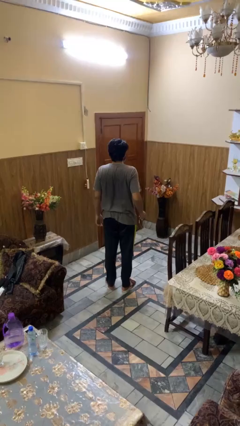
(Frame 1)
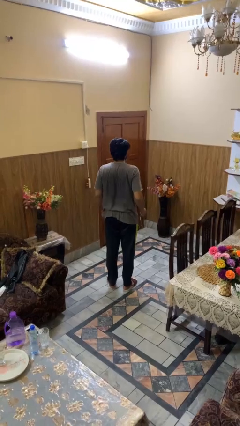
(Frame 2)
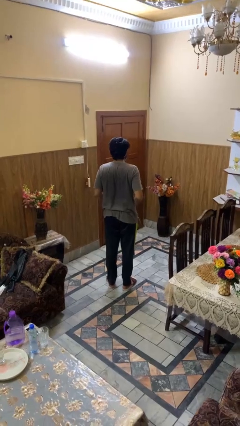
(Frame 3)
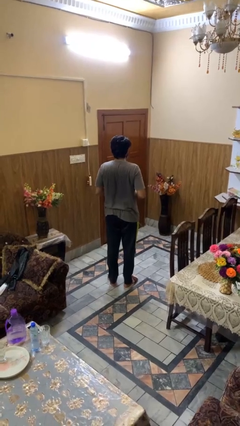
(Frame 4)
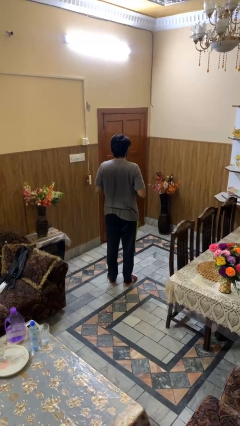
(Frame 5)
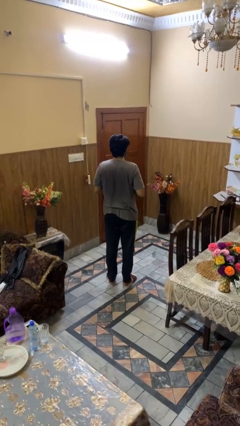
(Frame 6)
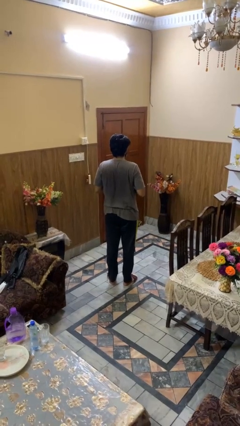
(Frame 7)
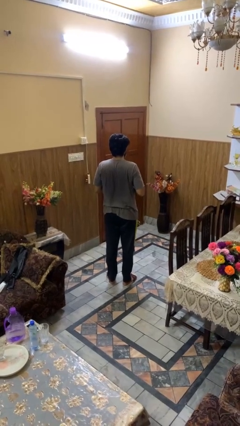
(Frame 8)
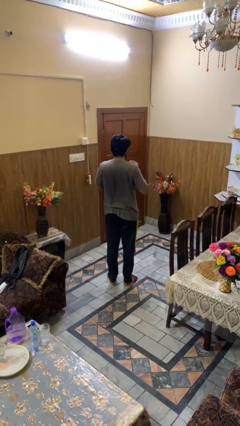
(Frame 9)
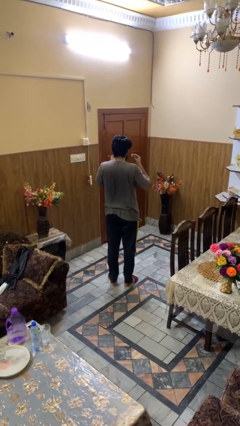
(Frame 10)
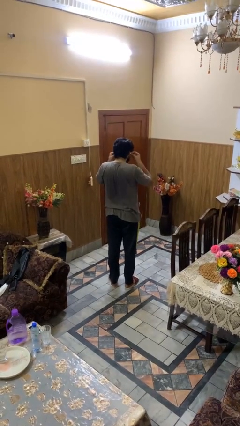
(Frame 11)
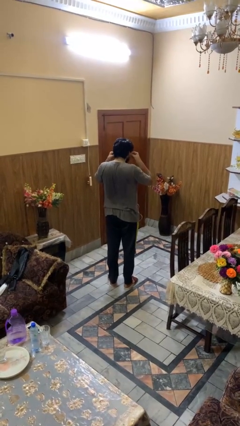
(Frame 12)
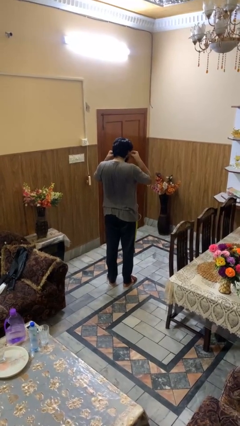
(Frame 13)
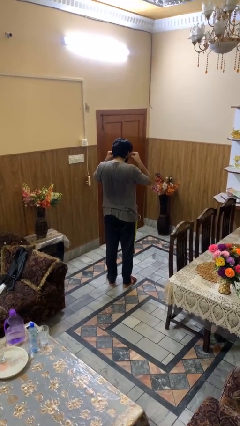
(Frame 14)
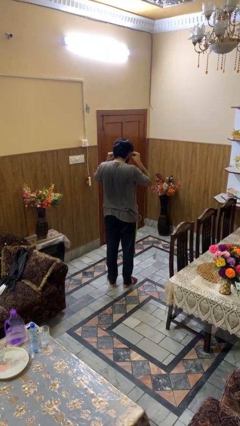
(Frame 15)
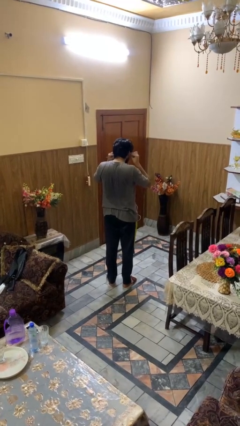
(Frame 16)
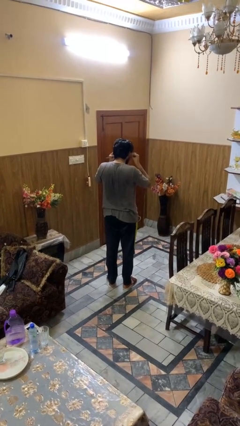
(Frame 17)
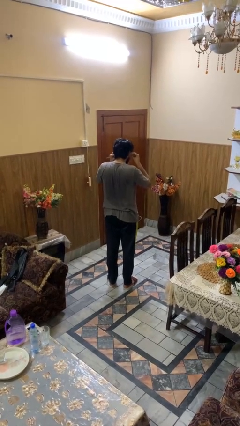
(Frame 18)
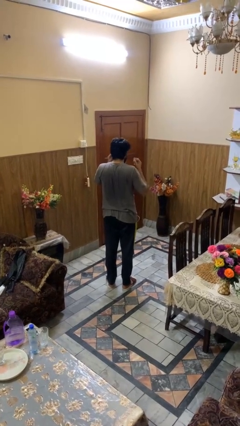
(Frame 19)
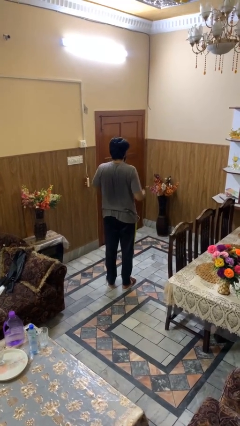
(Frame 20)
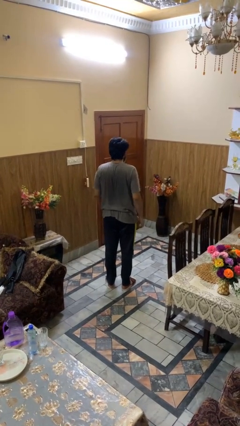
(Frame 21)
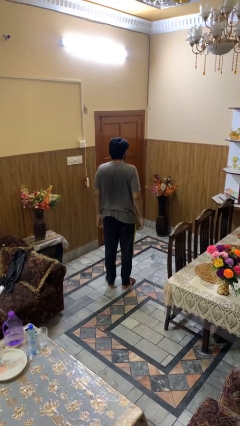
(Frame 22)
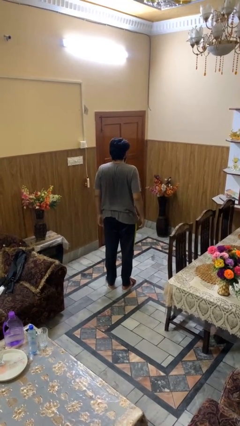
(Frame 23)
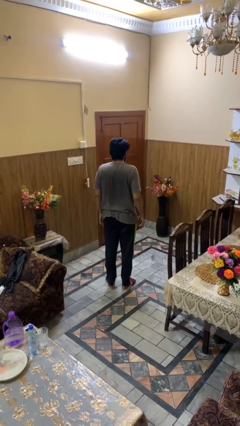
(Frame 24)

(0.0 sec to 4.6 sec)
person puts on headphones

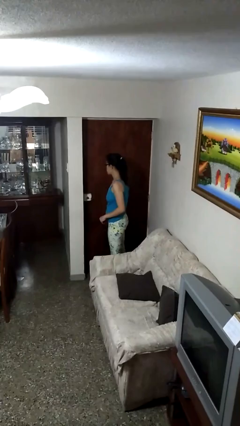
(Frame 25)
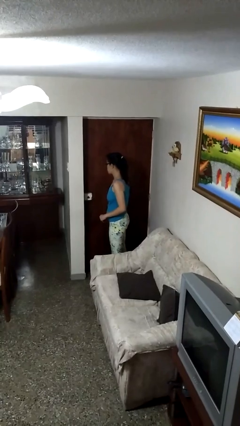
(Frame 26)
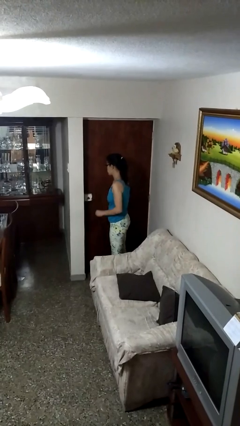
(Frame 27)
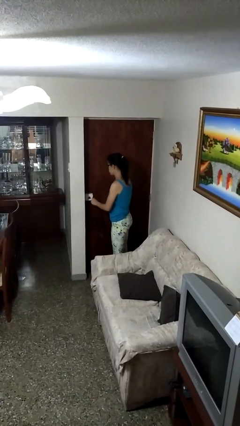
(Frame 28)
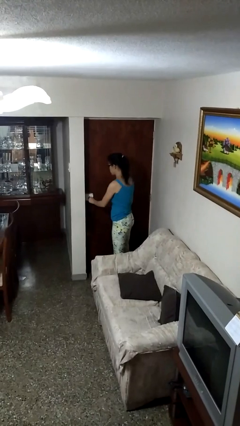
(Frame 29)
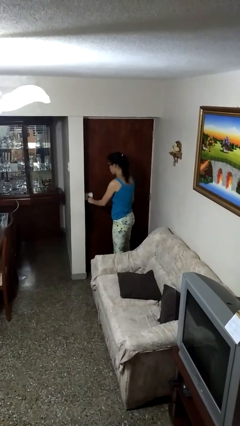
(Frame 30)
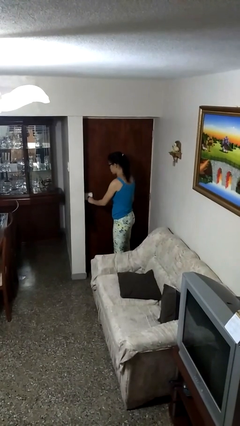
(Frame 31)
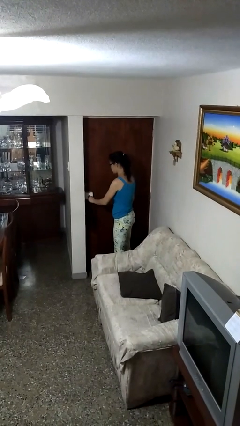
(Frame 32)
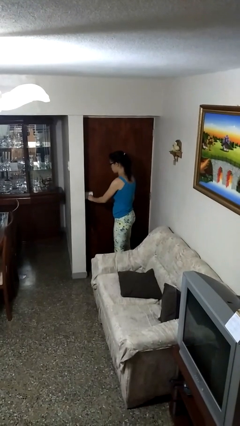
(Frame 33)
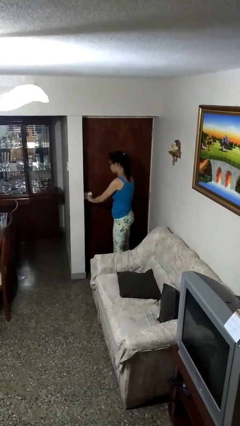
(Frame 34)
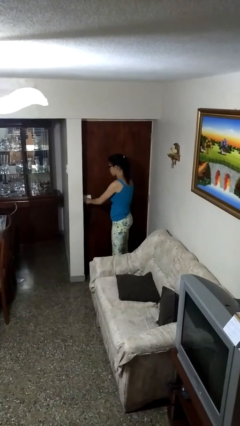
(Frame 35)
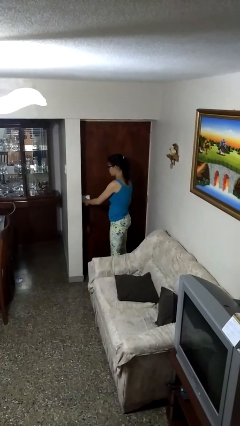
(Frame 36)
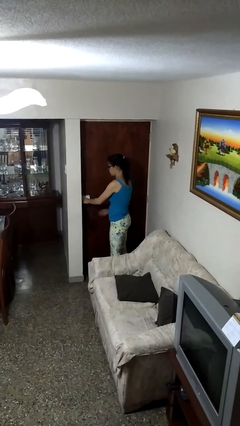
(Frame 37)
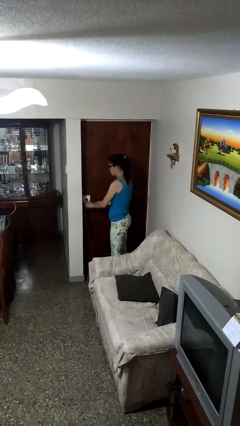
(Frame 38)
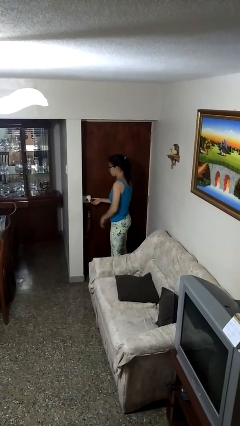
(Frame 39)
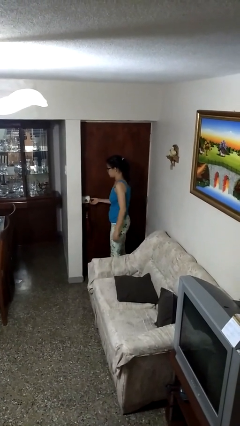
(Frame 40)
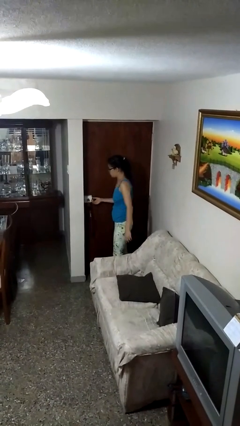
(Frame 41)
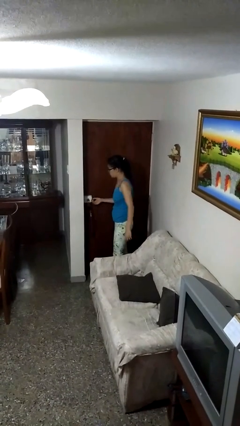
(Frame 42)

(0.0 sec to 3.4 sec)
person unlocks door with keys

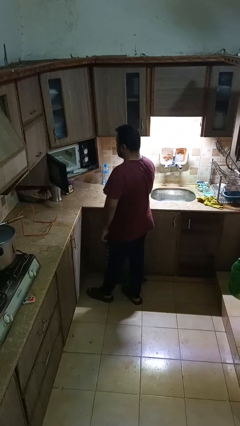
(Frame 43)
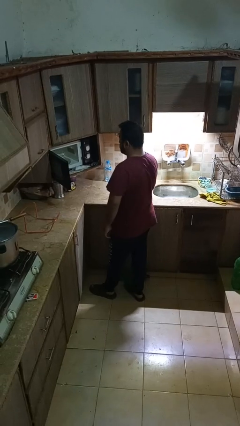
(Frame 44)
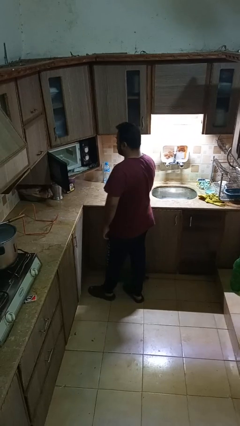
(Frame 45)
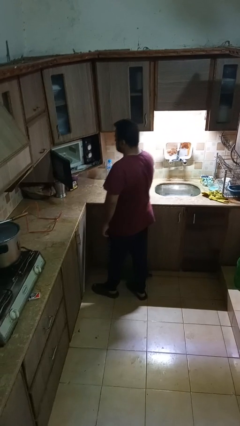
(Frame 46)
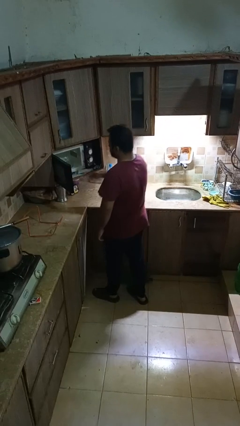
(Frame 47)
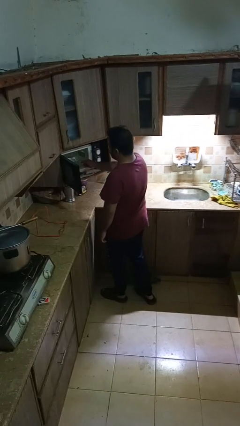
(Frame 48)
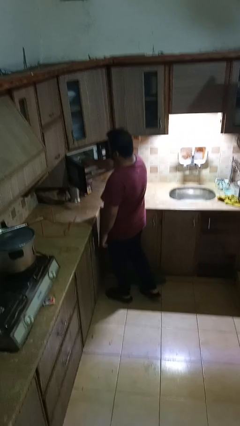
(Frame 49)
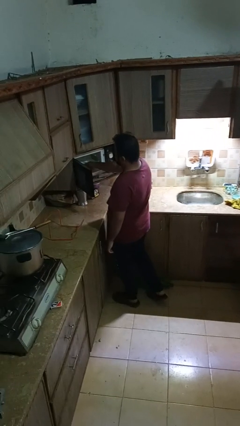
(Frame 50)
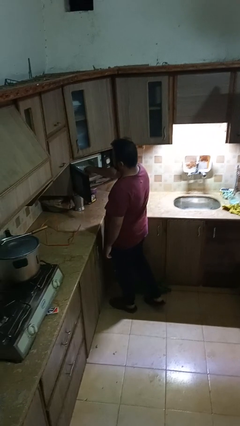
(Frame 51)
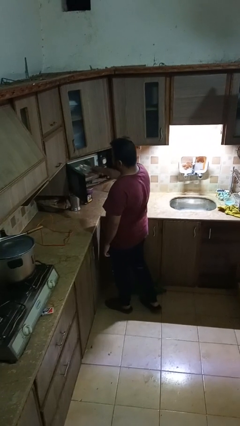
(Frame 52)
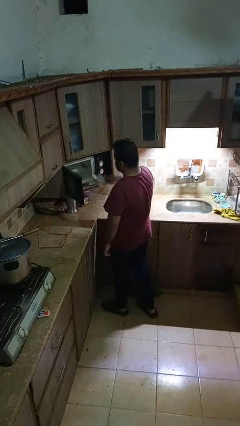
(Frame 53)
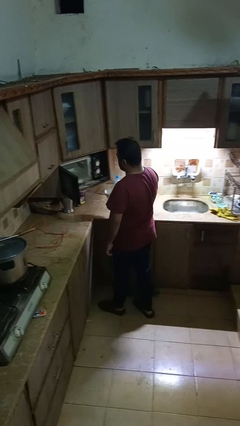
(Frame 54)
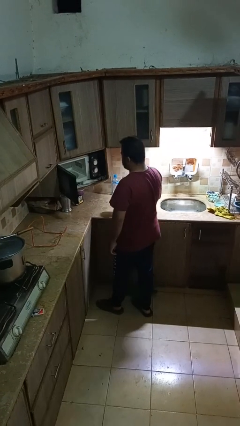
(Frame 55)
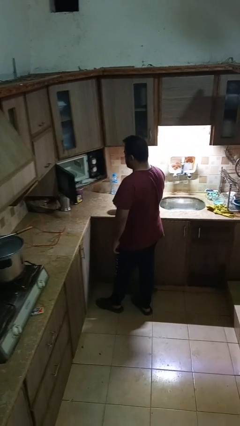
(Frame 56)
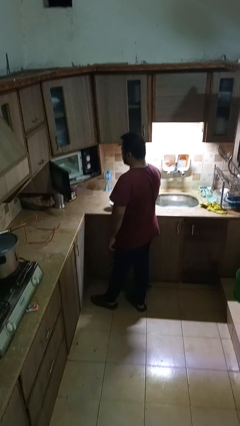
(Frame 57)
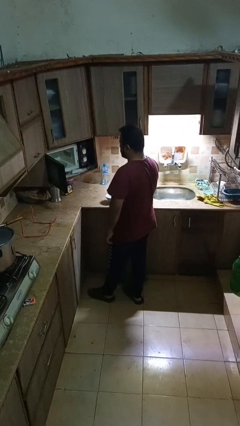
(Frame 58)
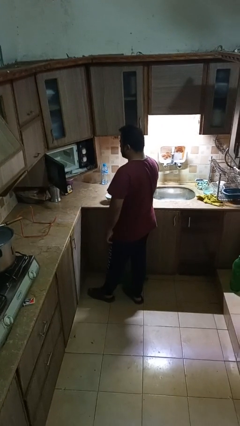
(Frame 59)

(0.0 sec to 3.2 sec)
person takes object from microwave

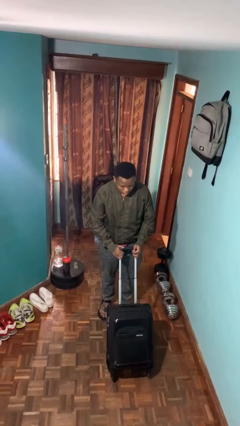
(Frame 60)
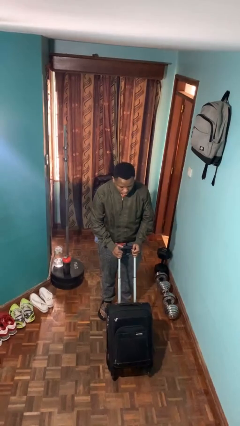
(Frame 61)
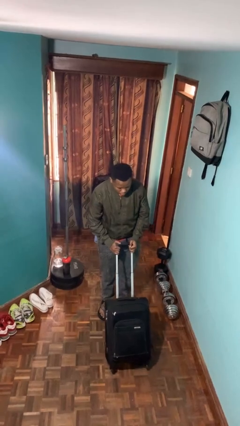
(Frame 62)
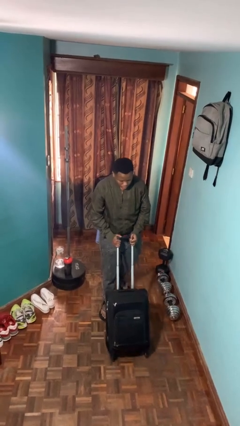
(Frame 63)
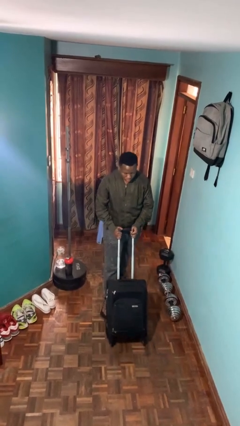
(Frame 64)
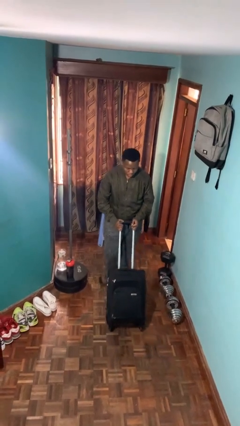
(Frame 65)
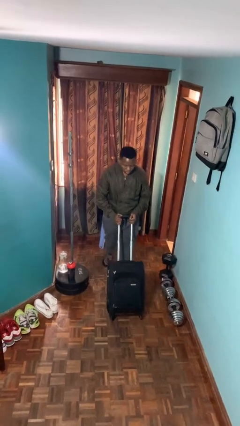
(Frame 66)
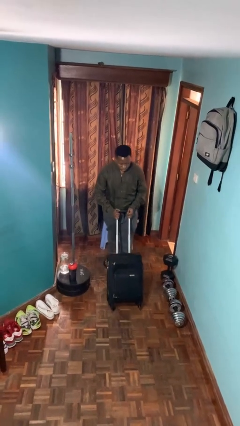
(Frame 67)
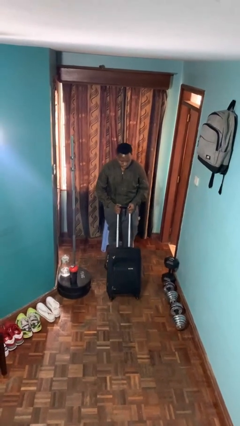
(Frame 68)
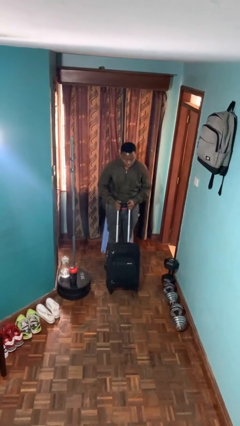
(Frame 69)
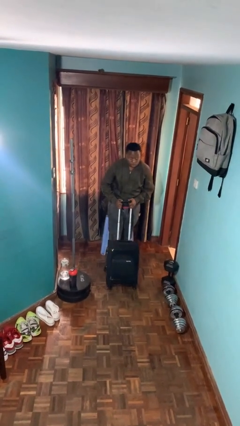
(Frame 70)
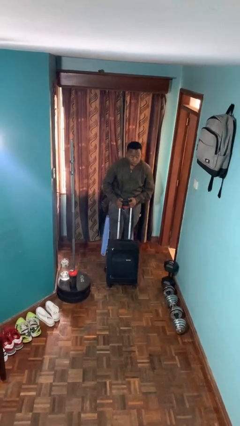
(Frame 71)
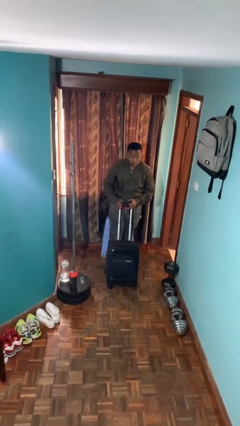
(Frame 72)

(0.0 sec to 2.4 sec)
person pulls wheeled cart

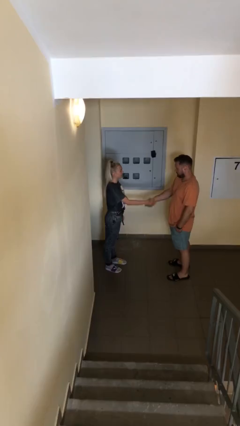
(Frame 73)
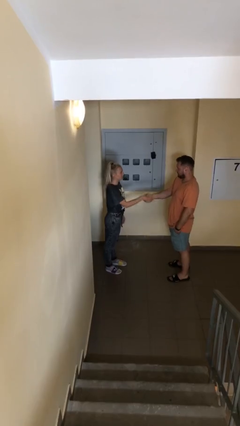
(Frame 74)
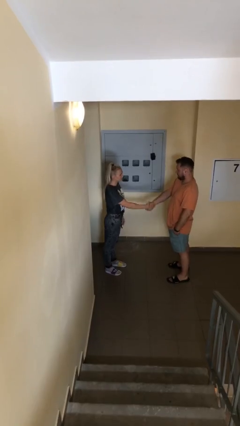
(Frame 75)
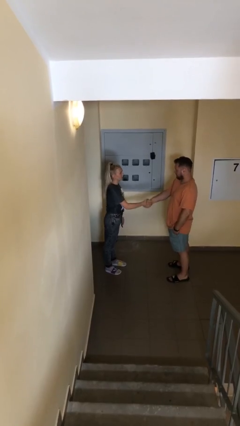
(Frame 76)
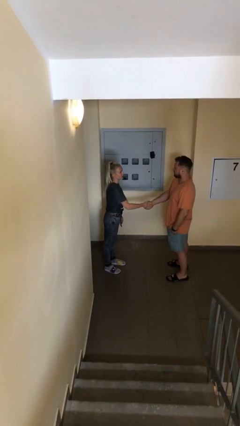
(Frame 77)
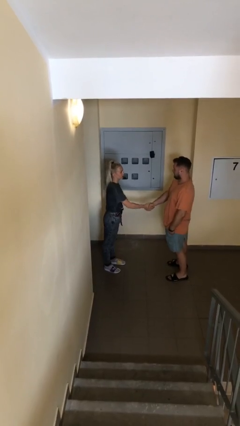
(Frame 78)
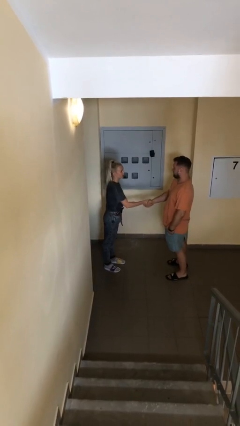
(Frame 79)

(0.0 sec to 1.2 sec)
person shakes hand

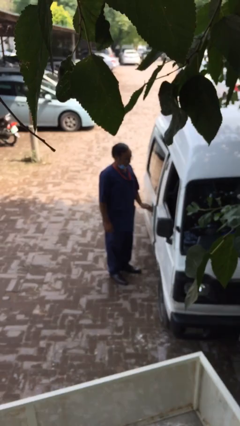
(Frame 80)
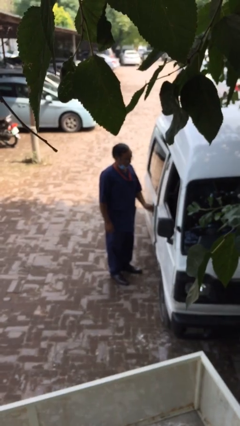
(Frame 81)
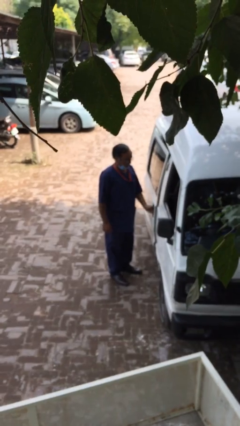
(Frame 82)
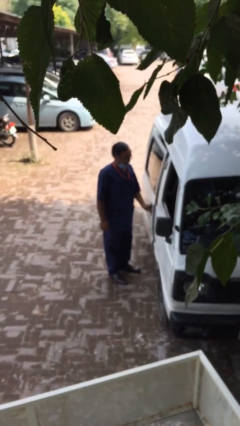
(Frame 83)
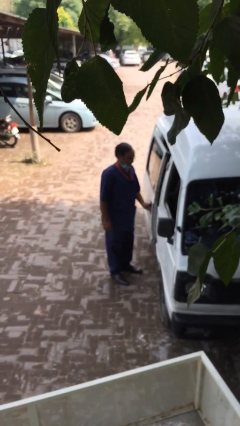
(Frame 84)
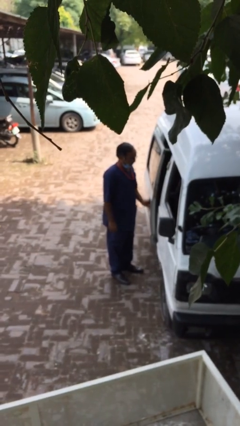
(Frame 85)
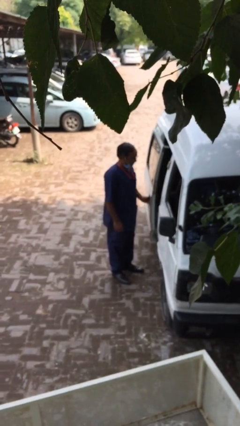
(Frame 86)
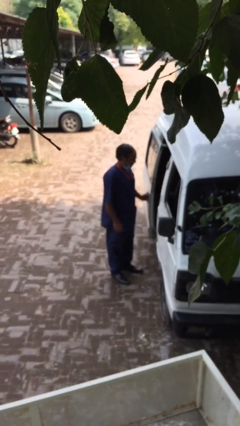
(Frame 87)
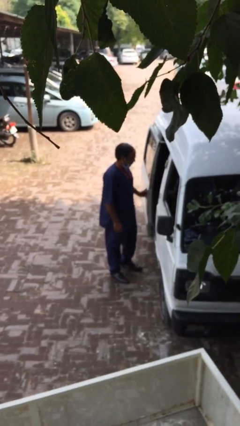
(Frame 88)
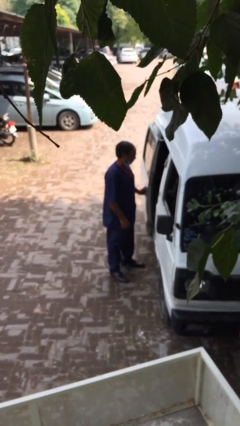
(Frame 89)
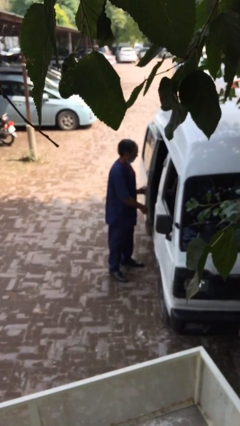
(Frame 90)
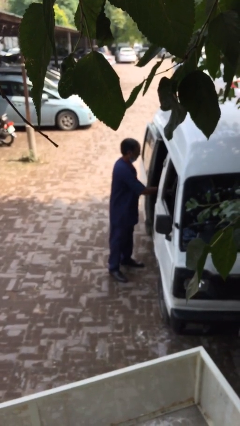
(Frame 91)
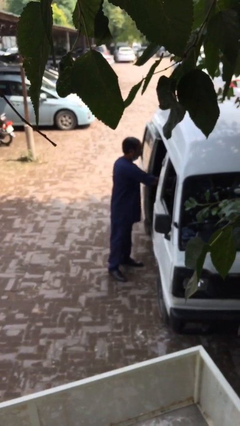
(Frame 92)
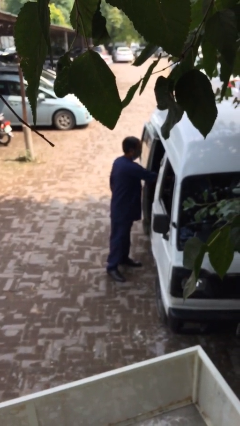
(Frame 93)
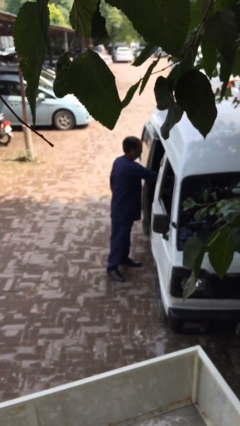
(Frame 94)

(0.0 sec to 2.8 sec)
person opens car door
